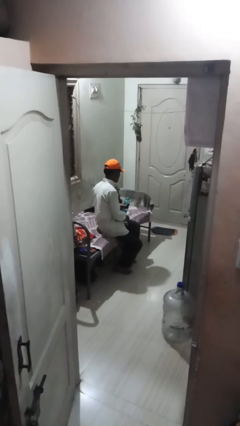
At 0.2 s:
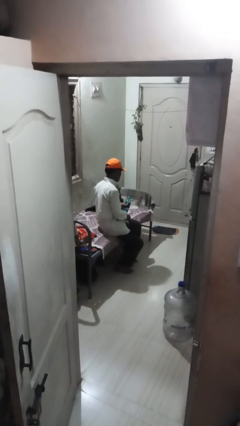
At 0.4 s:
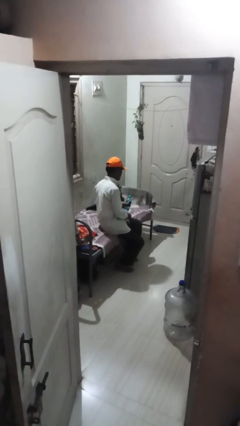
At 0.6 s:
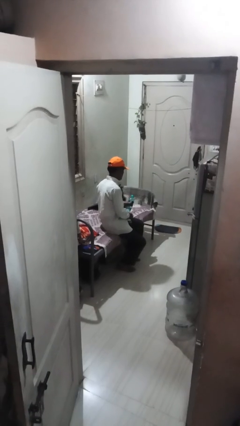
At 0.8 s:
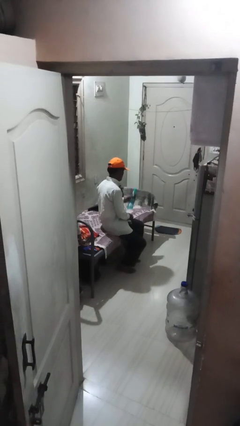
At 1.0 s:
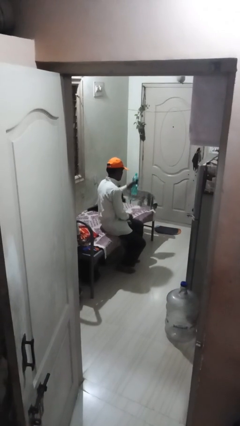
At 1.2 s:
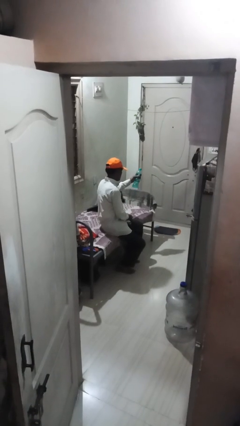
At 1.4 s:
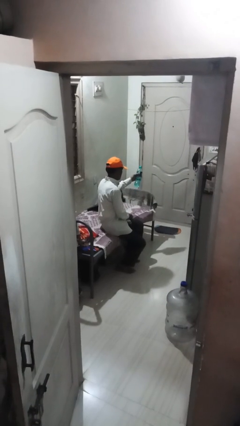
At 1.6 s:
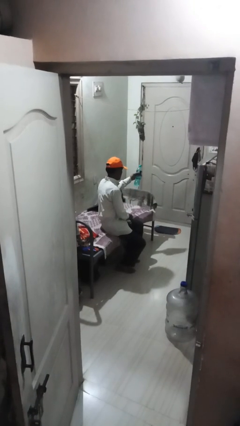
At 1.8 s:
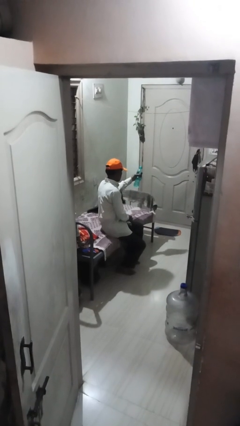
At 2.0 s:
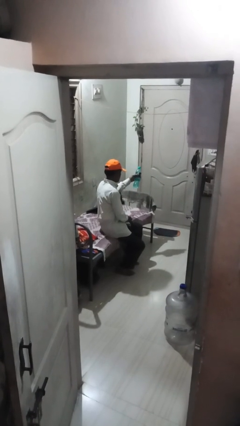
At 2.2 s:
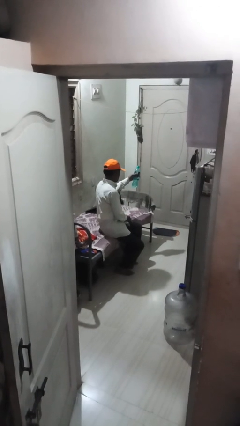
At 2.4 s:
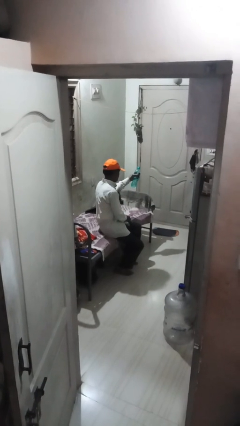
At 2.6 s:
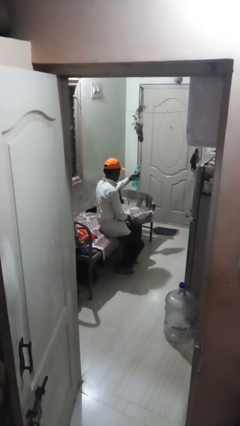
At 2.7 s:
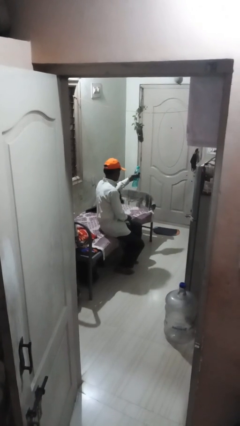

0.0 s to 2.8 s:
person squeezes object

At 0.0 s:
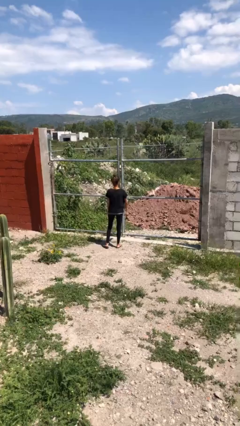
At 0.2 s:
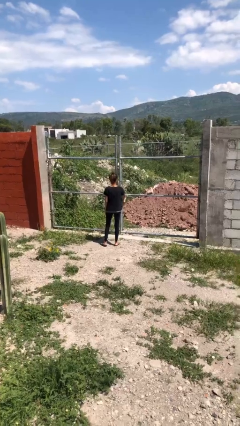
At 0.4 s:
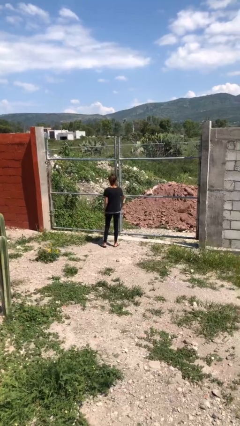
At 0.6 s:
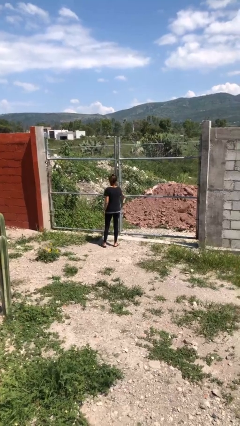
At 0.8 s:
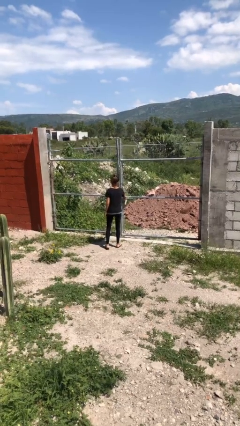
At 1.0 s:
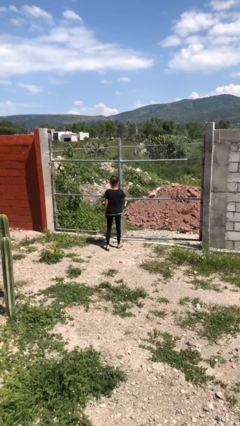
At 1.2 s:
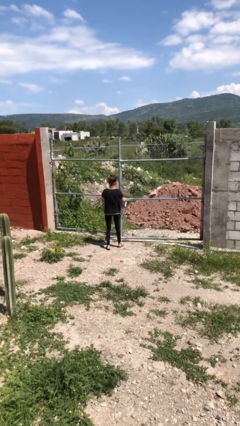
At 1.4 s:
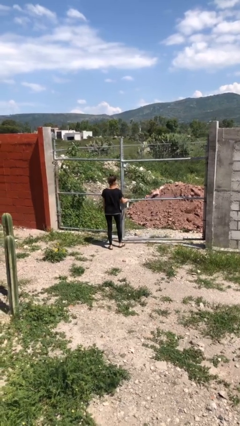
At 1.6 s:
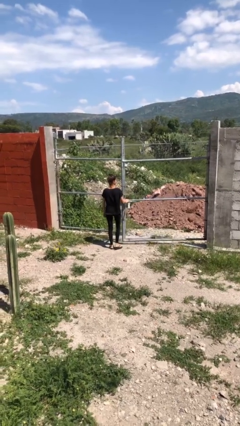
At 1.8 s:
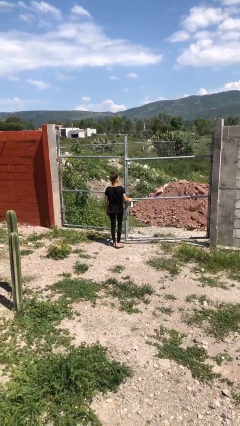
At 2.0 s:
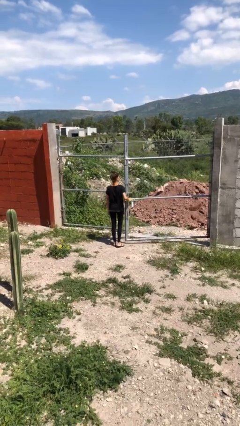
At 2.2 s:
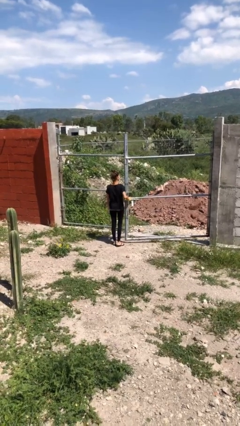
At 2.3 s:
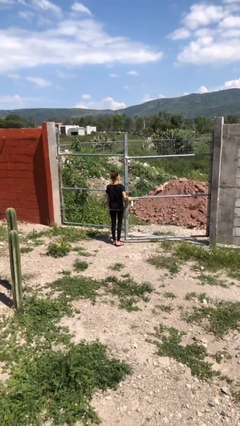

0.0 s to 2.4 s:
person opens gate

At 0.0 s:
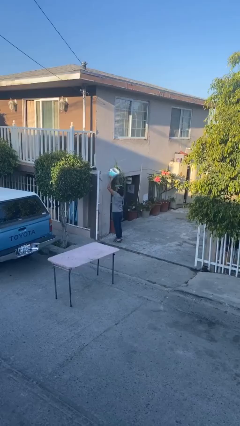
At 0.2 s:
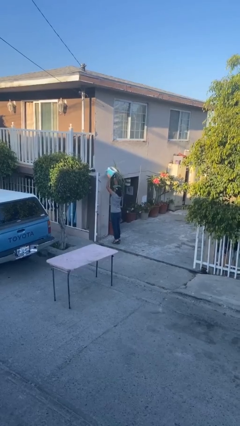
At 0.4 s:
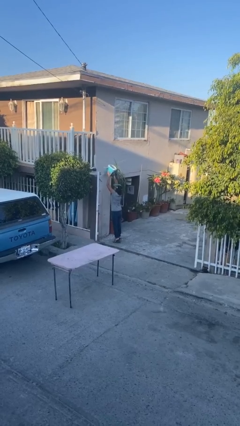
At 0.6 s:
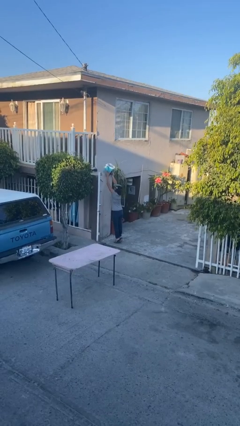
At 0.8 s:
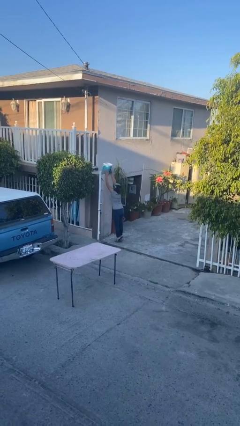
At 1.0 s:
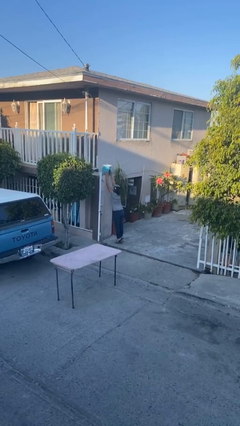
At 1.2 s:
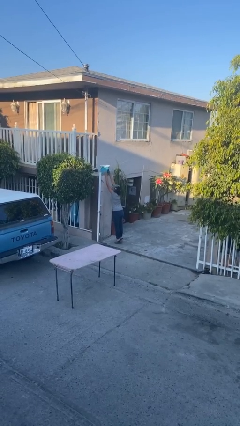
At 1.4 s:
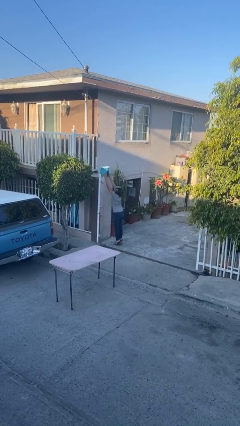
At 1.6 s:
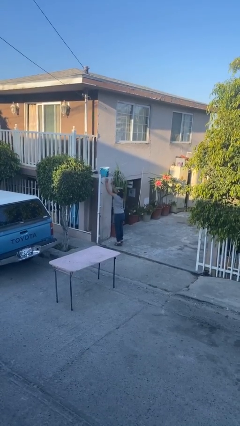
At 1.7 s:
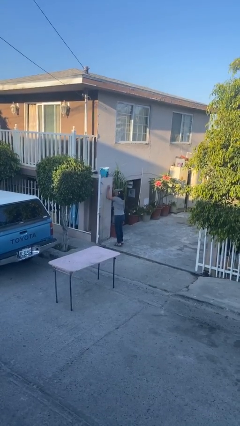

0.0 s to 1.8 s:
person puts down object on shelf

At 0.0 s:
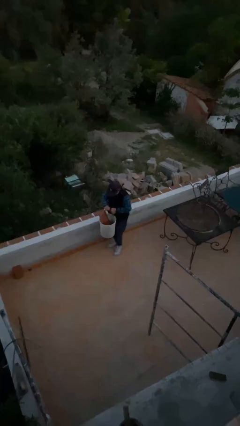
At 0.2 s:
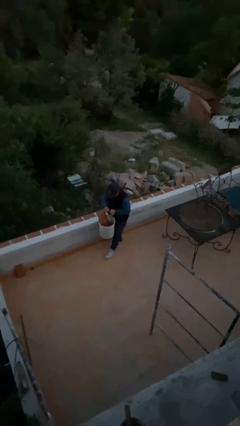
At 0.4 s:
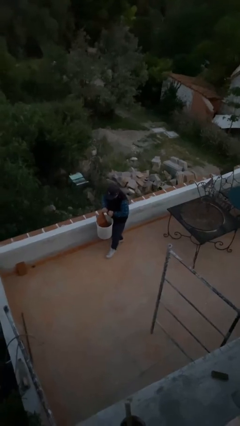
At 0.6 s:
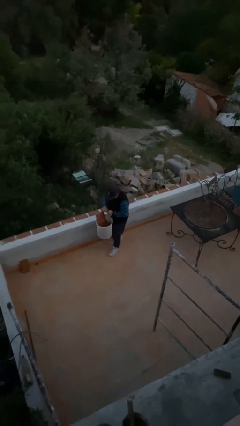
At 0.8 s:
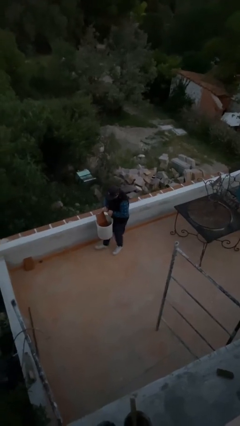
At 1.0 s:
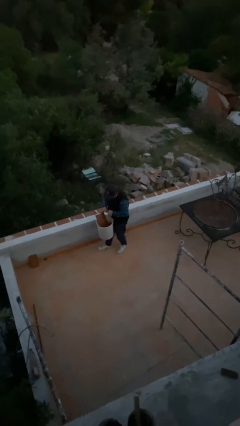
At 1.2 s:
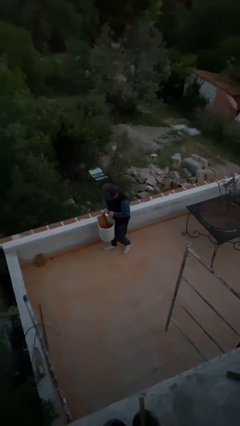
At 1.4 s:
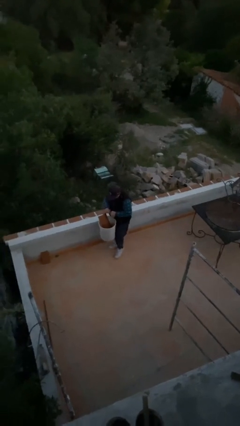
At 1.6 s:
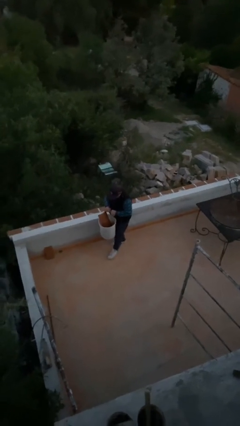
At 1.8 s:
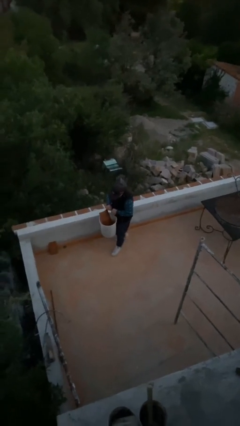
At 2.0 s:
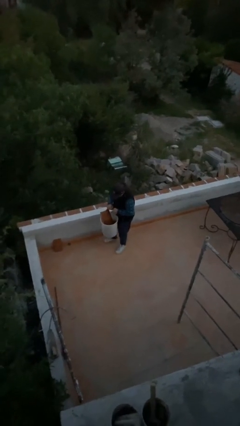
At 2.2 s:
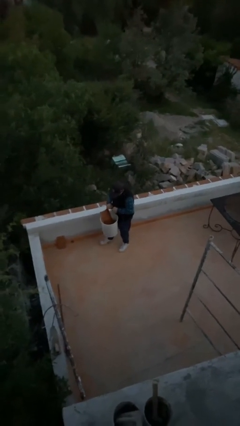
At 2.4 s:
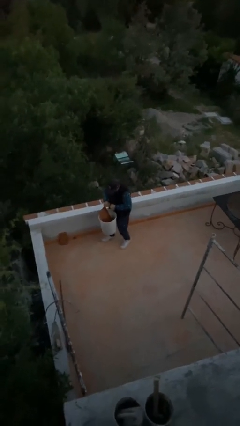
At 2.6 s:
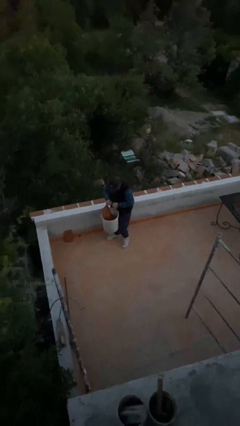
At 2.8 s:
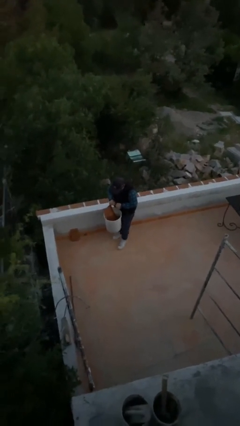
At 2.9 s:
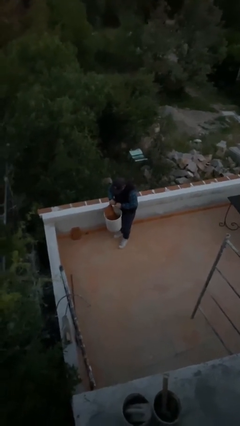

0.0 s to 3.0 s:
person carries heavy object

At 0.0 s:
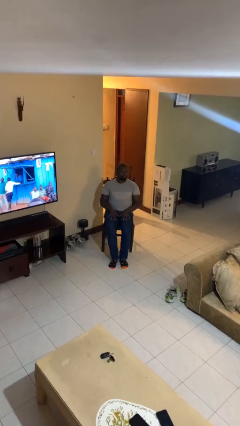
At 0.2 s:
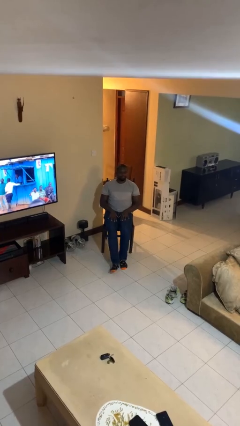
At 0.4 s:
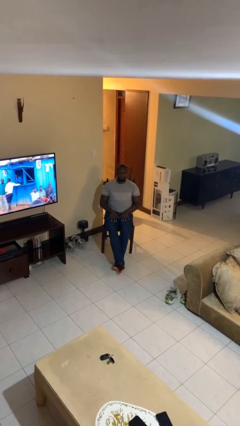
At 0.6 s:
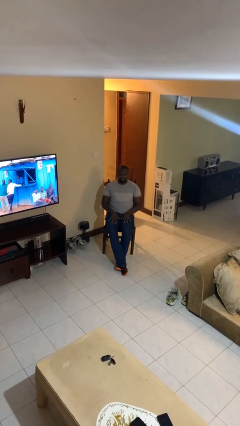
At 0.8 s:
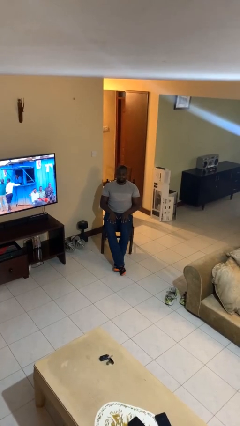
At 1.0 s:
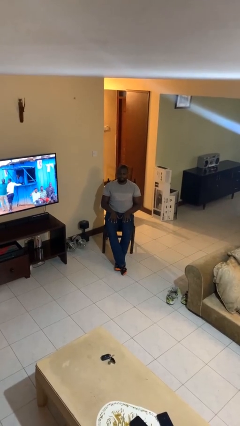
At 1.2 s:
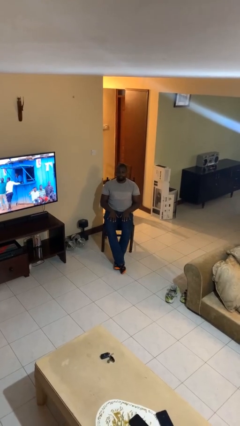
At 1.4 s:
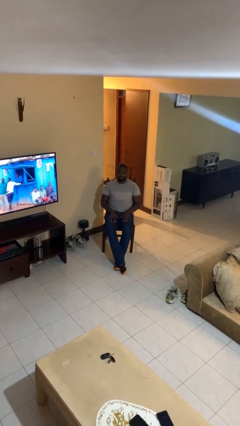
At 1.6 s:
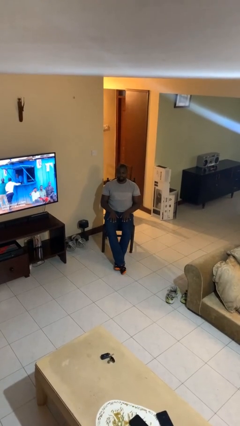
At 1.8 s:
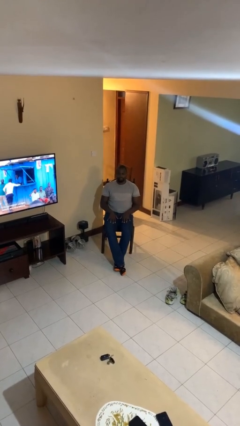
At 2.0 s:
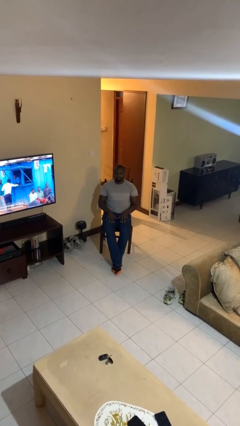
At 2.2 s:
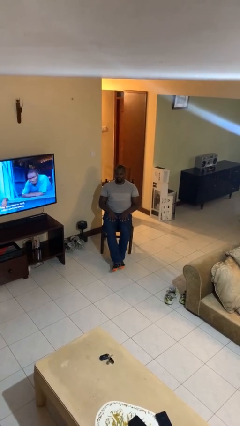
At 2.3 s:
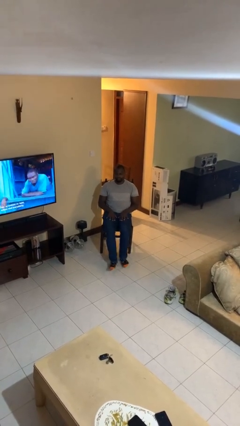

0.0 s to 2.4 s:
person crosses legs

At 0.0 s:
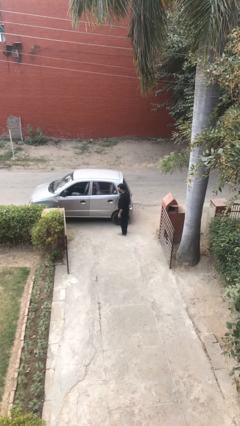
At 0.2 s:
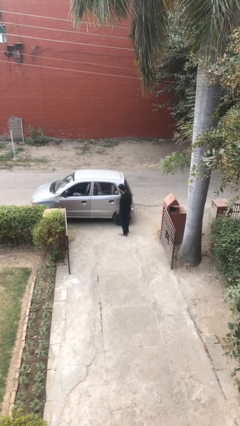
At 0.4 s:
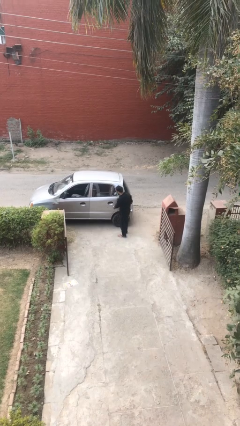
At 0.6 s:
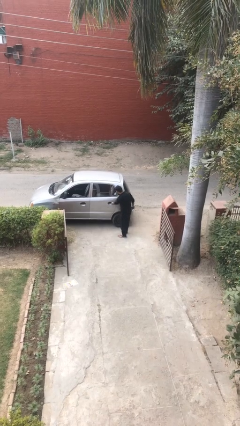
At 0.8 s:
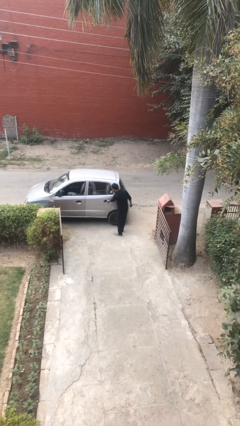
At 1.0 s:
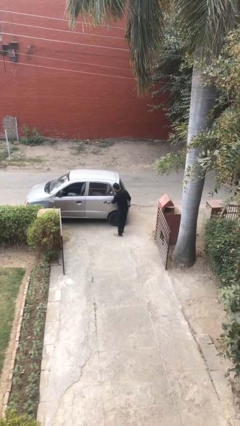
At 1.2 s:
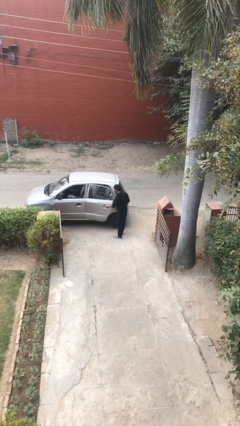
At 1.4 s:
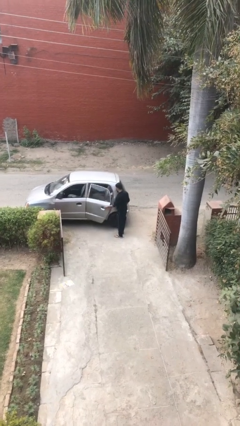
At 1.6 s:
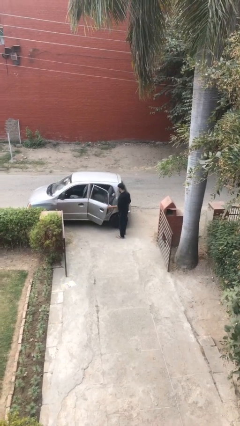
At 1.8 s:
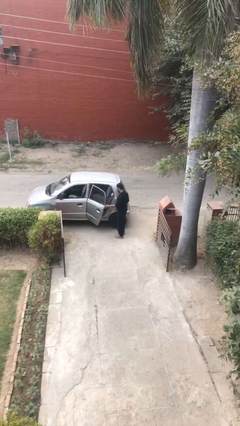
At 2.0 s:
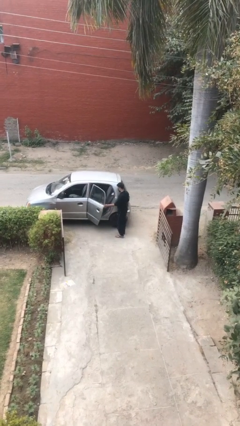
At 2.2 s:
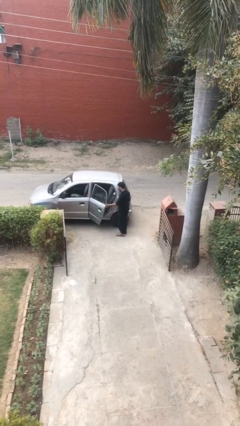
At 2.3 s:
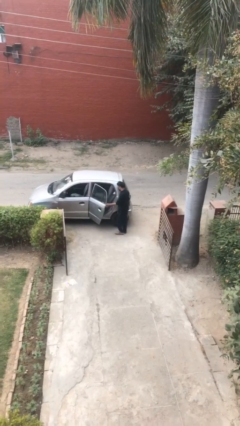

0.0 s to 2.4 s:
person opens car door

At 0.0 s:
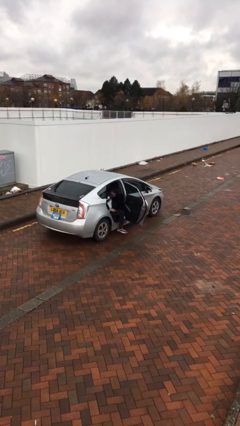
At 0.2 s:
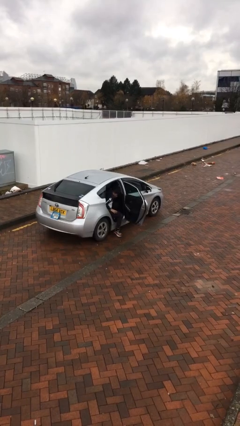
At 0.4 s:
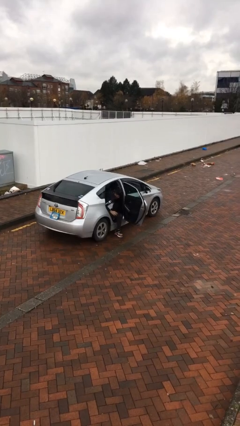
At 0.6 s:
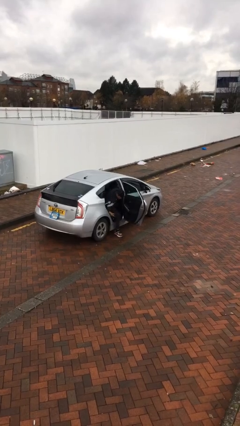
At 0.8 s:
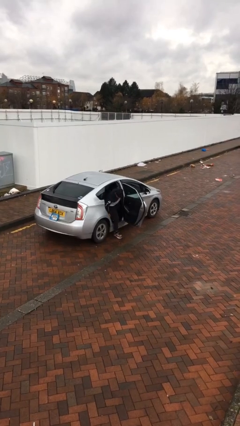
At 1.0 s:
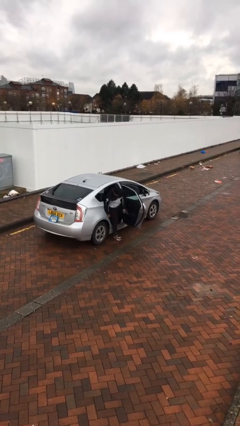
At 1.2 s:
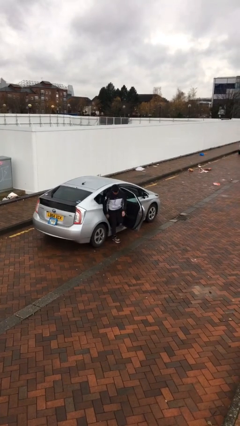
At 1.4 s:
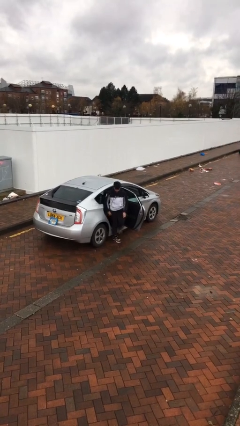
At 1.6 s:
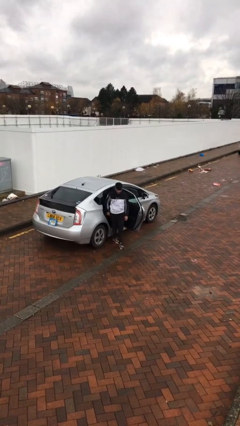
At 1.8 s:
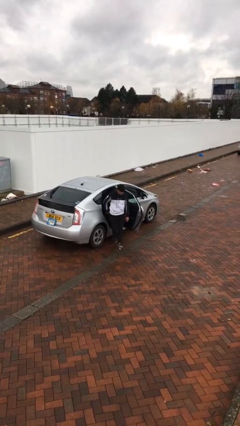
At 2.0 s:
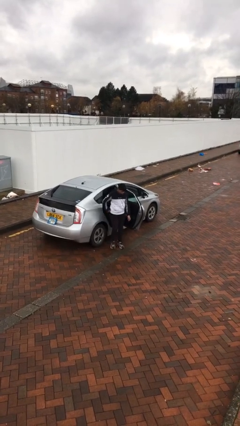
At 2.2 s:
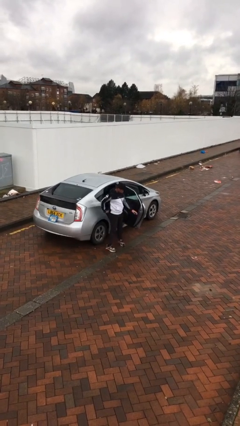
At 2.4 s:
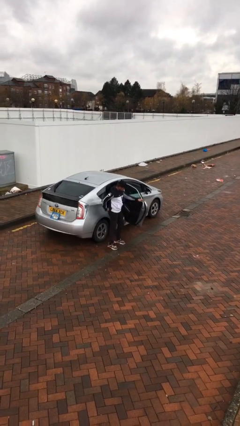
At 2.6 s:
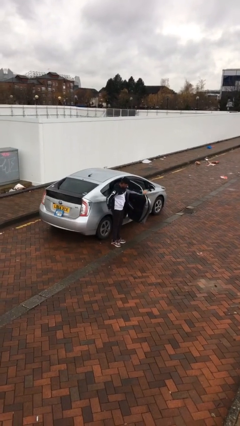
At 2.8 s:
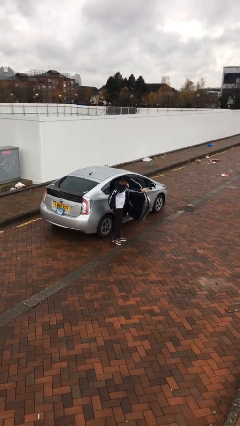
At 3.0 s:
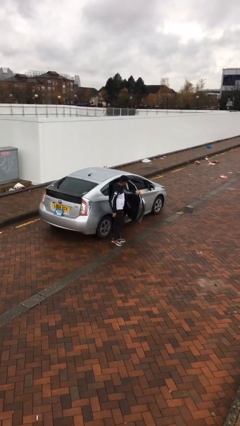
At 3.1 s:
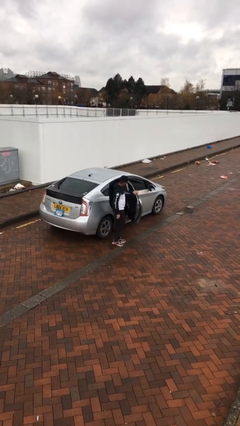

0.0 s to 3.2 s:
person exits car
